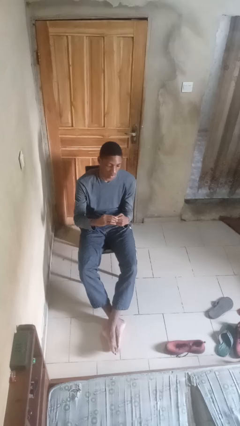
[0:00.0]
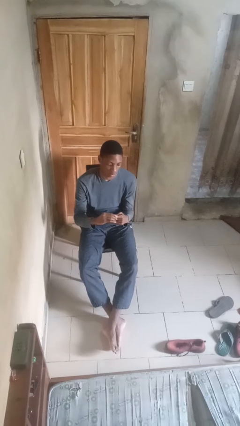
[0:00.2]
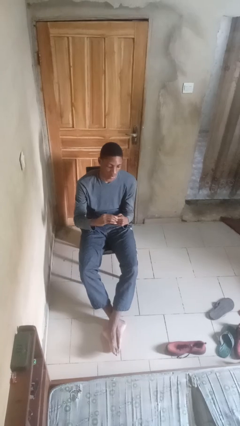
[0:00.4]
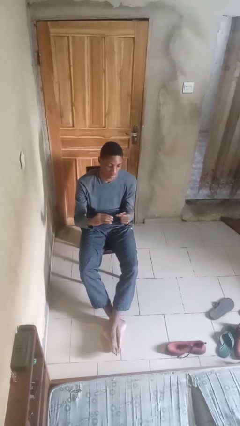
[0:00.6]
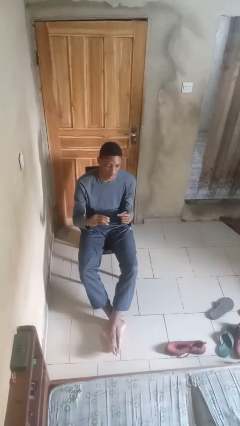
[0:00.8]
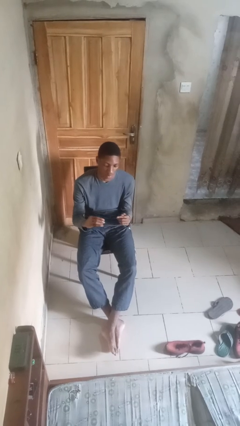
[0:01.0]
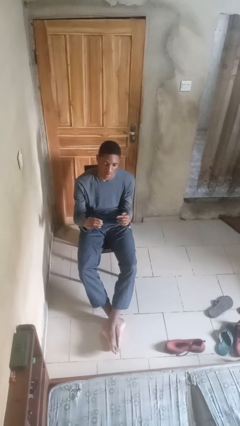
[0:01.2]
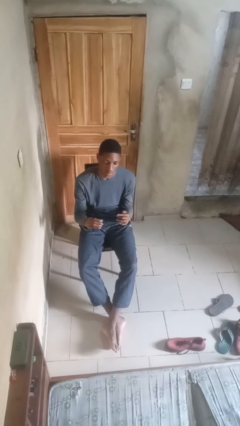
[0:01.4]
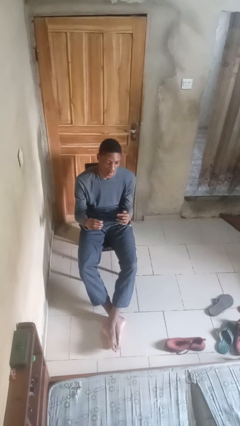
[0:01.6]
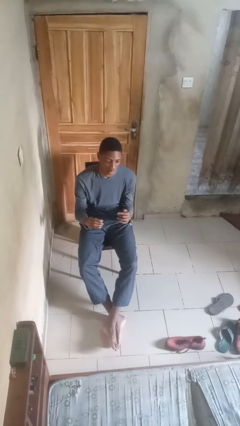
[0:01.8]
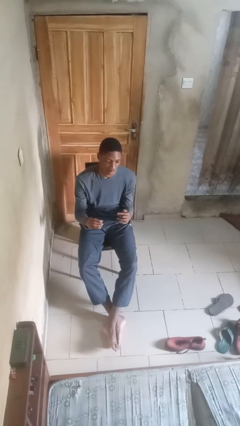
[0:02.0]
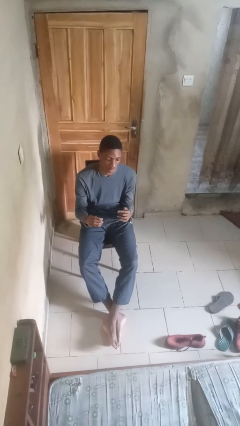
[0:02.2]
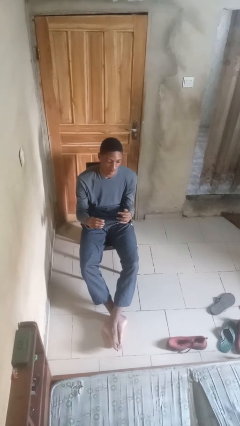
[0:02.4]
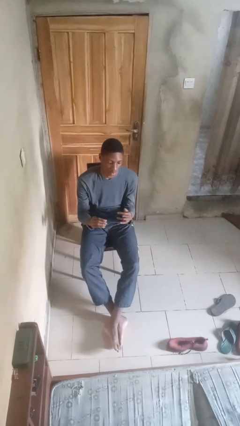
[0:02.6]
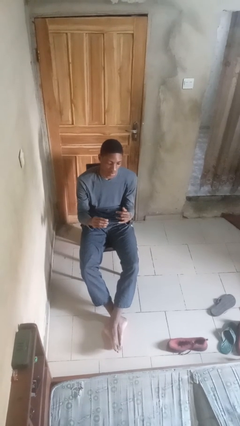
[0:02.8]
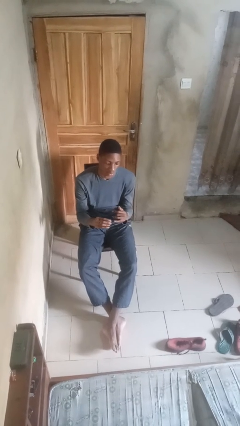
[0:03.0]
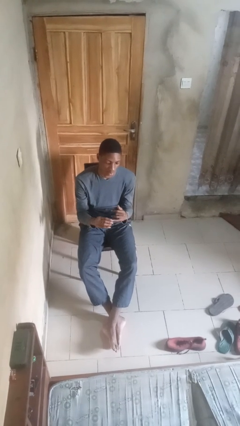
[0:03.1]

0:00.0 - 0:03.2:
person takes off ring

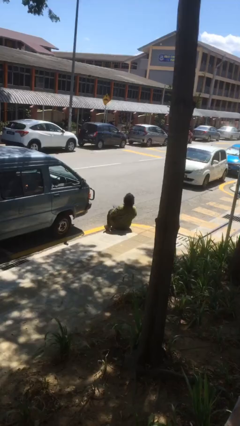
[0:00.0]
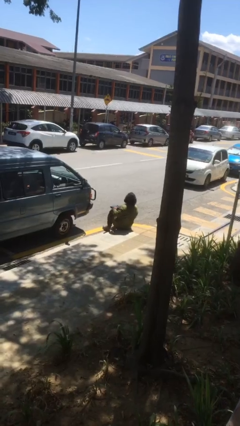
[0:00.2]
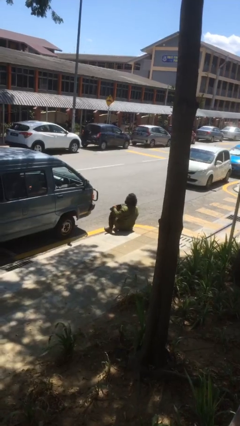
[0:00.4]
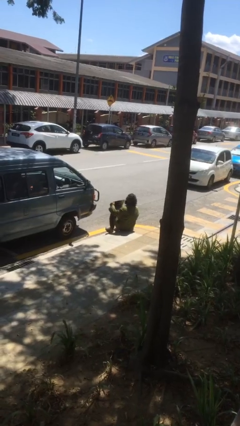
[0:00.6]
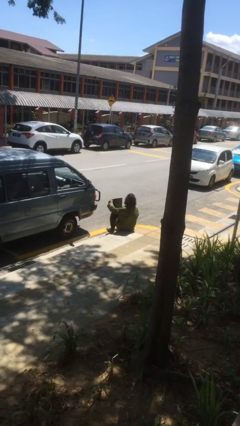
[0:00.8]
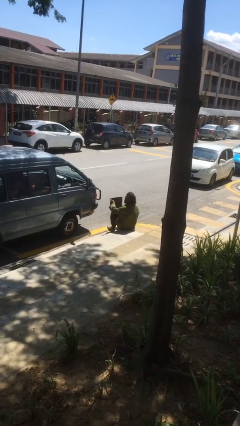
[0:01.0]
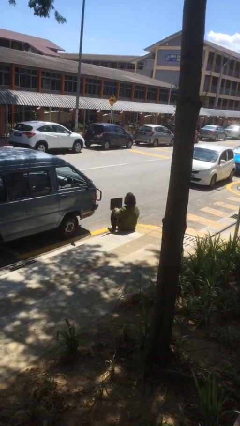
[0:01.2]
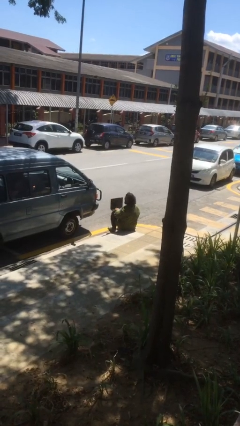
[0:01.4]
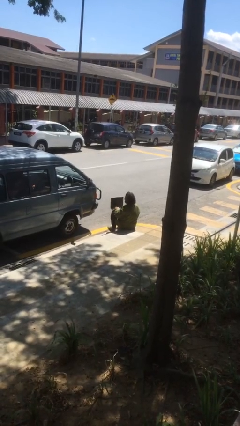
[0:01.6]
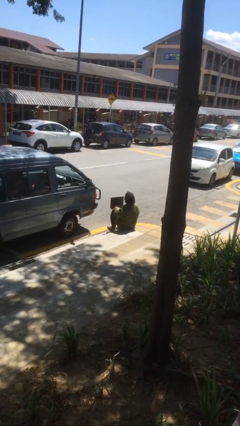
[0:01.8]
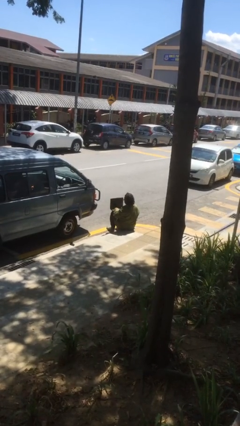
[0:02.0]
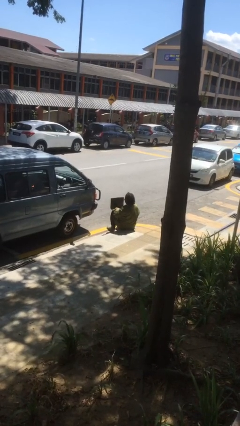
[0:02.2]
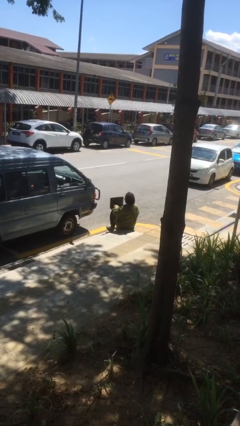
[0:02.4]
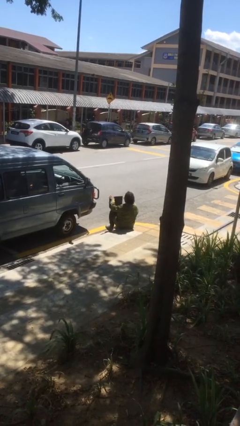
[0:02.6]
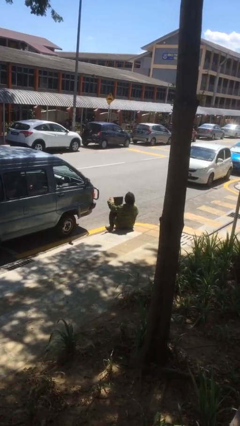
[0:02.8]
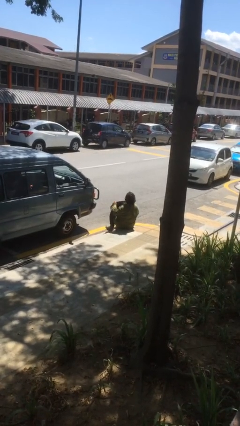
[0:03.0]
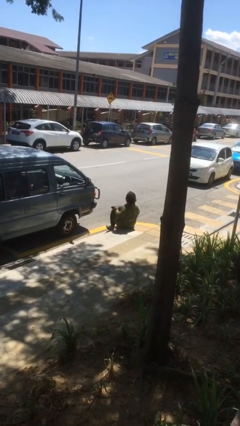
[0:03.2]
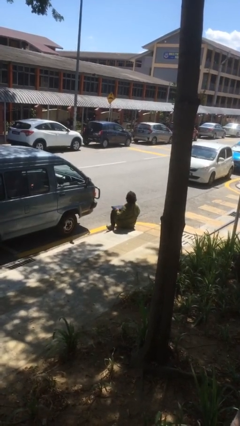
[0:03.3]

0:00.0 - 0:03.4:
person interacts with laptop

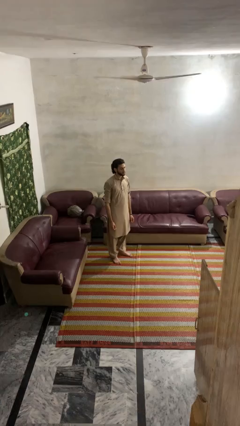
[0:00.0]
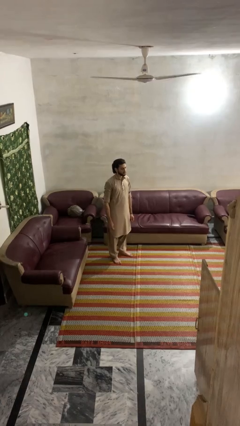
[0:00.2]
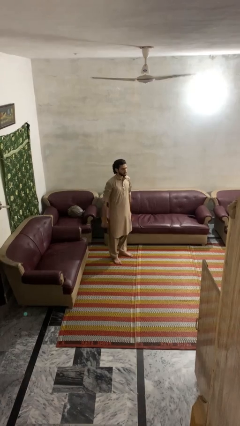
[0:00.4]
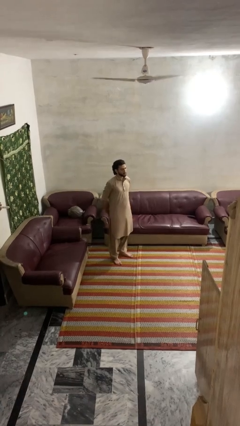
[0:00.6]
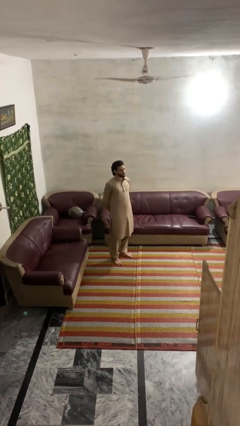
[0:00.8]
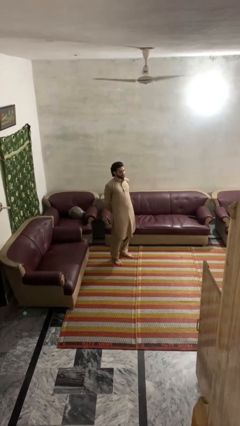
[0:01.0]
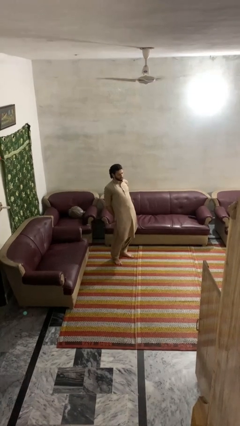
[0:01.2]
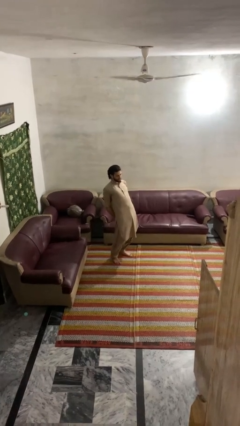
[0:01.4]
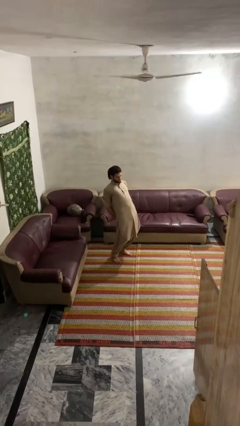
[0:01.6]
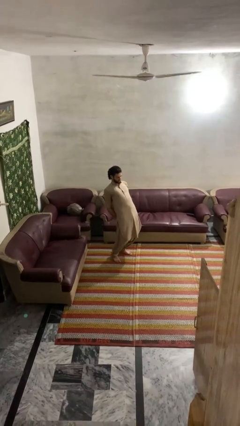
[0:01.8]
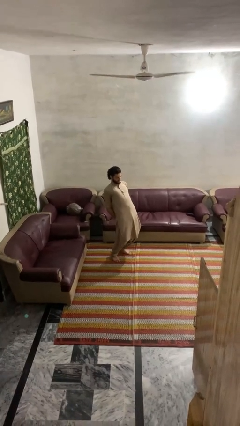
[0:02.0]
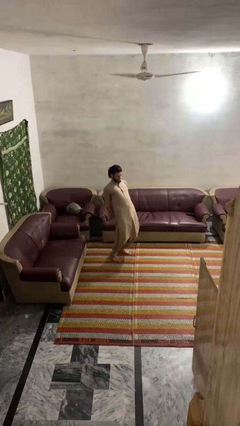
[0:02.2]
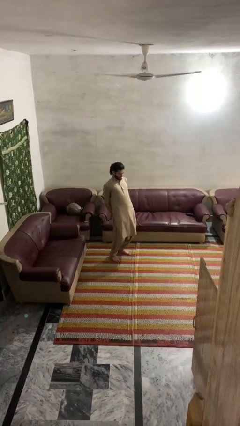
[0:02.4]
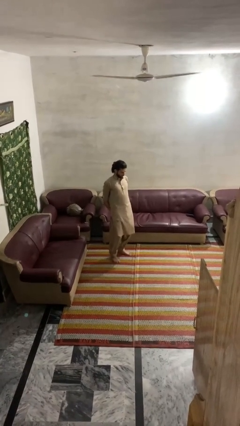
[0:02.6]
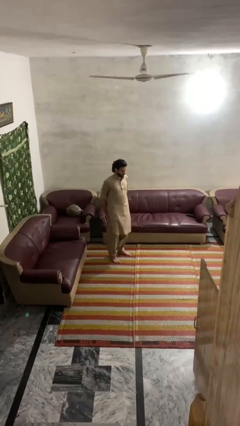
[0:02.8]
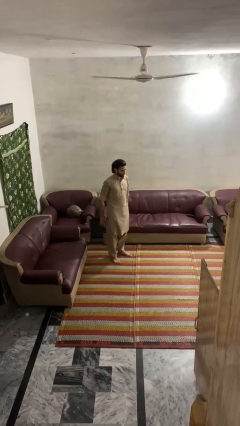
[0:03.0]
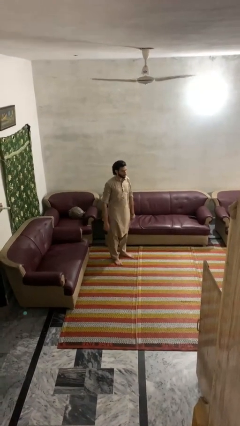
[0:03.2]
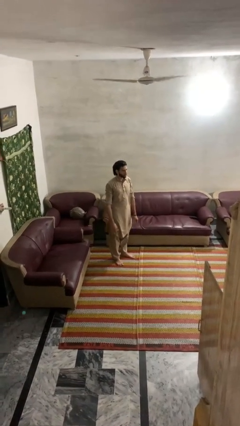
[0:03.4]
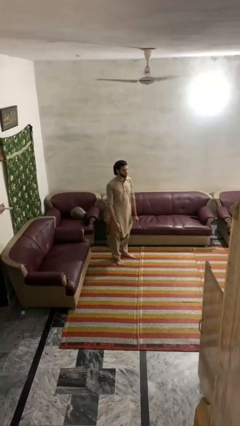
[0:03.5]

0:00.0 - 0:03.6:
person stretches back

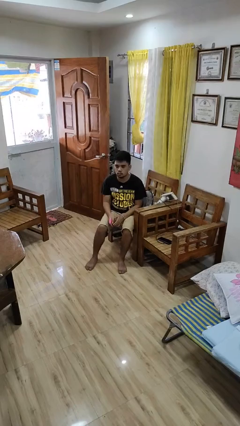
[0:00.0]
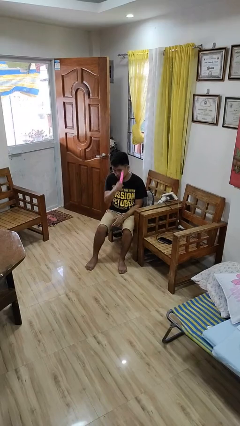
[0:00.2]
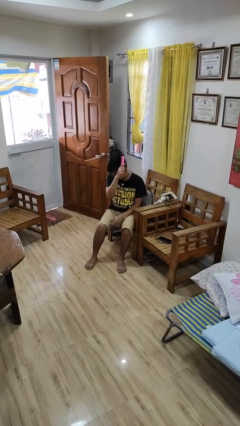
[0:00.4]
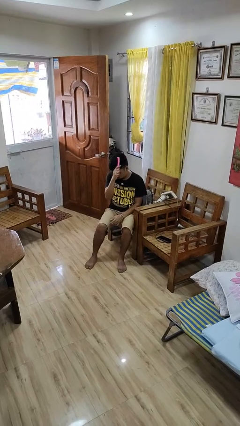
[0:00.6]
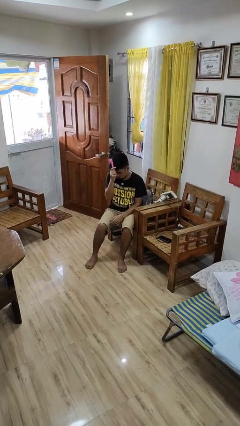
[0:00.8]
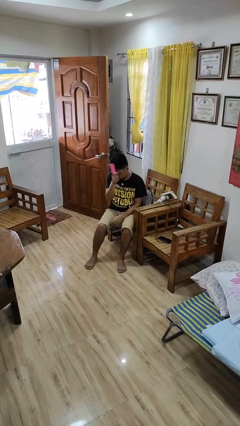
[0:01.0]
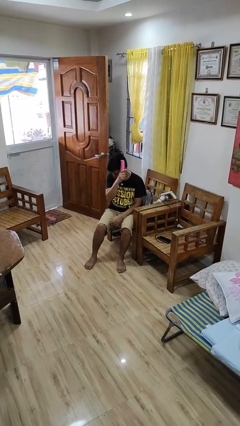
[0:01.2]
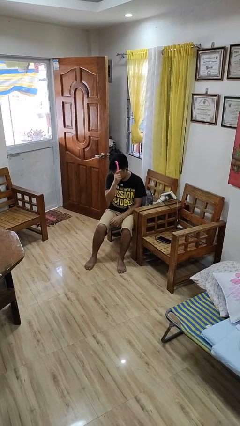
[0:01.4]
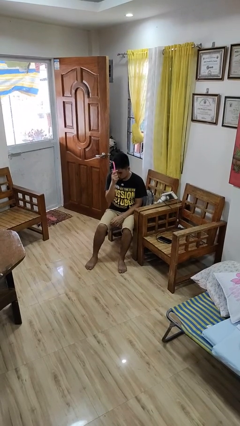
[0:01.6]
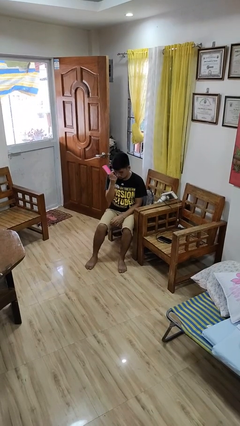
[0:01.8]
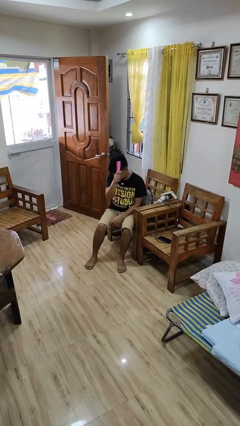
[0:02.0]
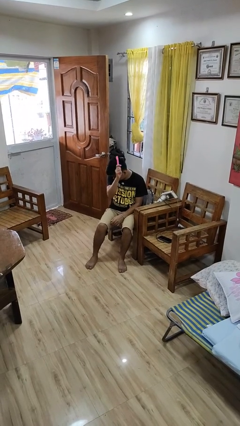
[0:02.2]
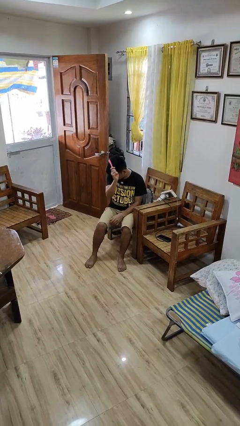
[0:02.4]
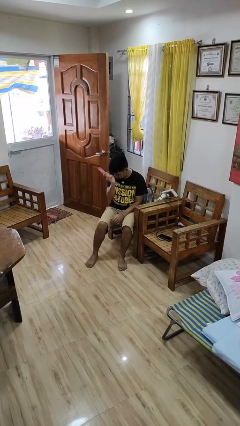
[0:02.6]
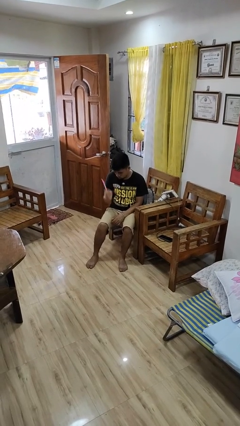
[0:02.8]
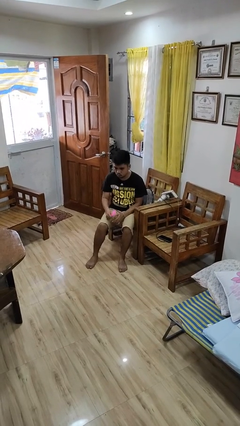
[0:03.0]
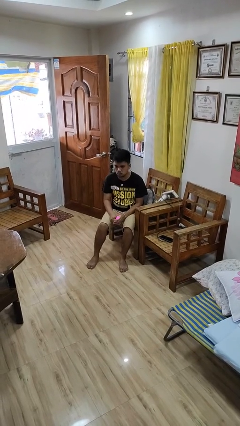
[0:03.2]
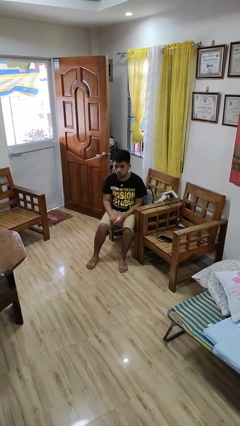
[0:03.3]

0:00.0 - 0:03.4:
person brushes hair

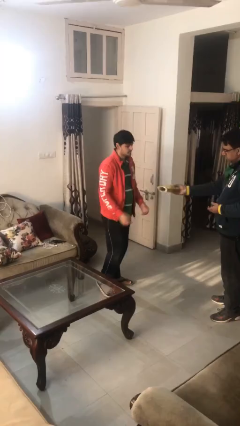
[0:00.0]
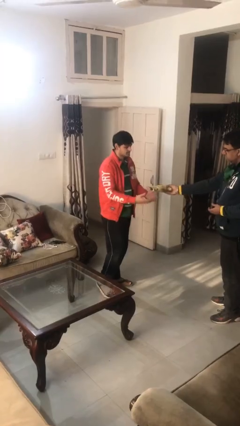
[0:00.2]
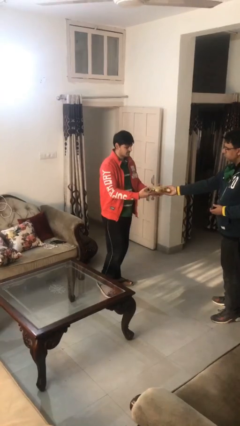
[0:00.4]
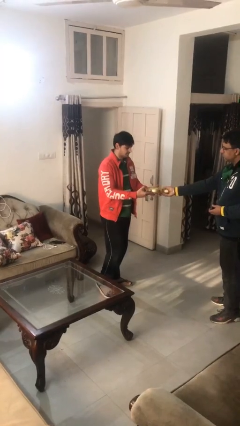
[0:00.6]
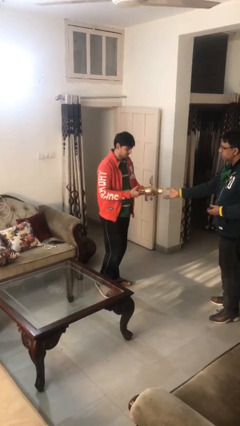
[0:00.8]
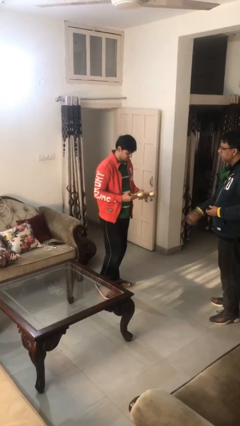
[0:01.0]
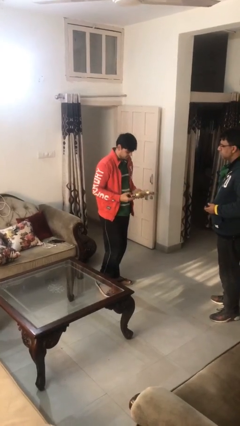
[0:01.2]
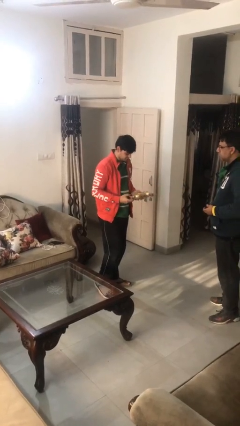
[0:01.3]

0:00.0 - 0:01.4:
person transfers object to person

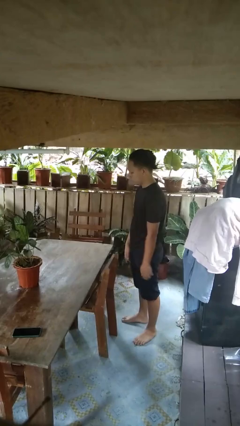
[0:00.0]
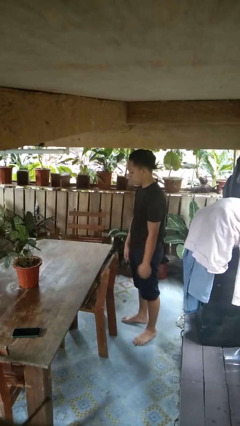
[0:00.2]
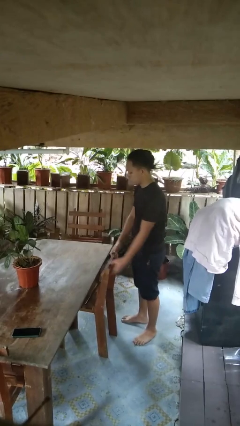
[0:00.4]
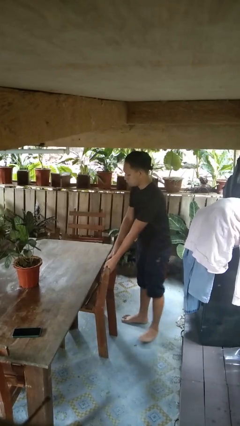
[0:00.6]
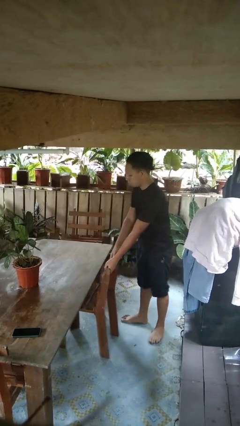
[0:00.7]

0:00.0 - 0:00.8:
person pulls out chair

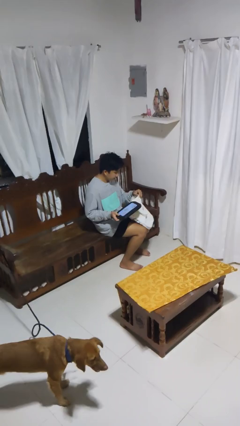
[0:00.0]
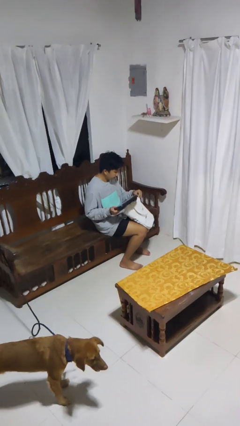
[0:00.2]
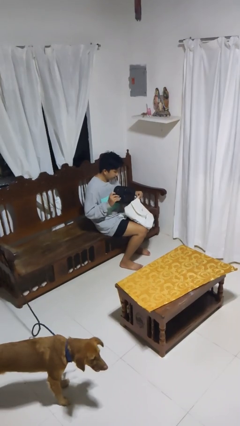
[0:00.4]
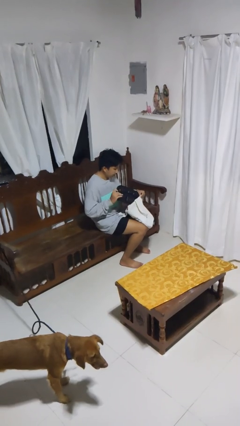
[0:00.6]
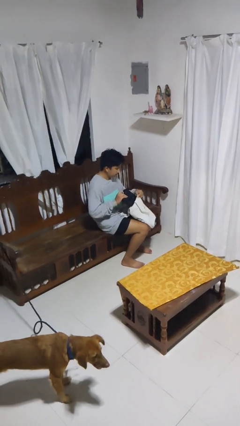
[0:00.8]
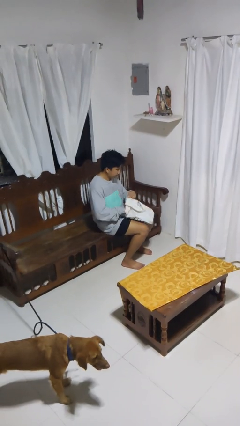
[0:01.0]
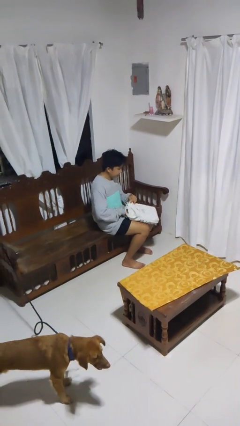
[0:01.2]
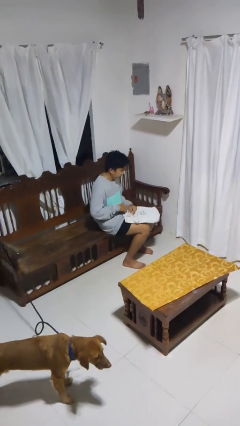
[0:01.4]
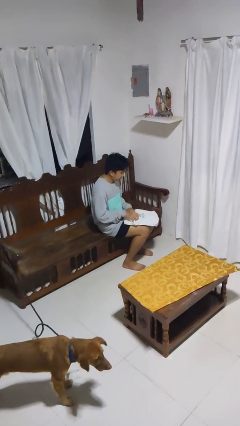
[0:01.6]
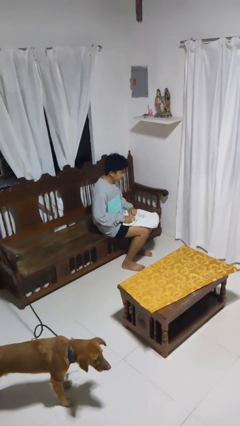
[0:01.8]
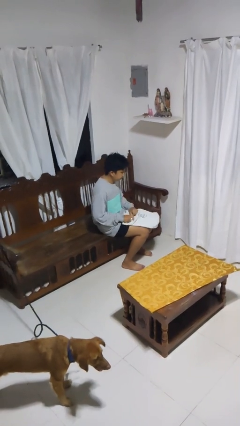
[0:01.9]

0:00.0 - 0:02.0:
person puts object into bag
